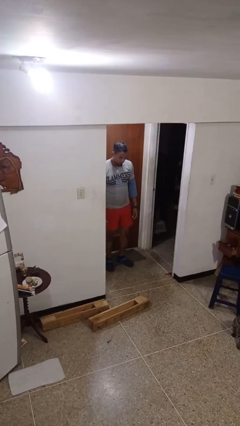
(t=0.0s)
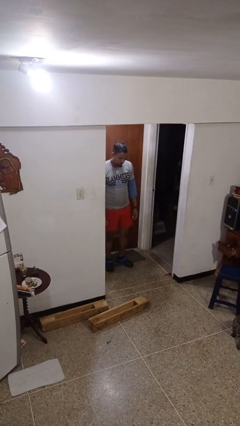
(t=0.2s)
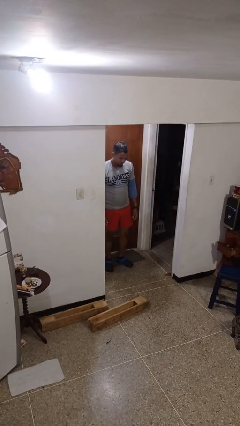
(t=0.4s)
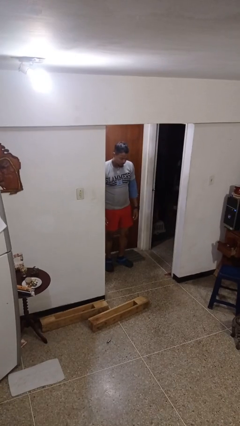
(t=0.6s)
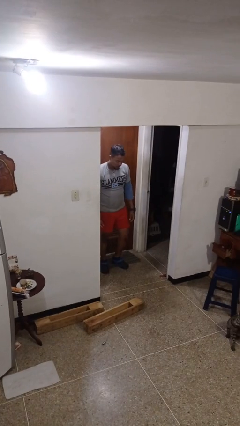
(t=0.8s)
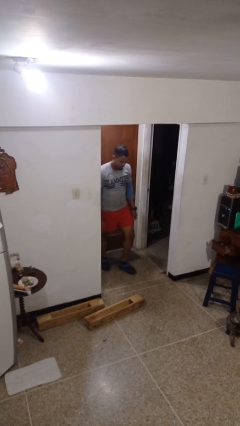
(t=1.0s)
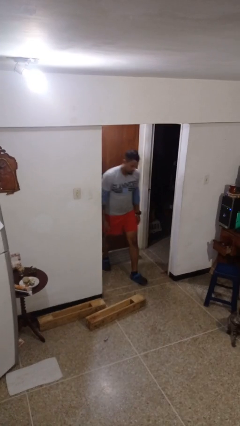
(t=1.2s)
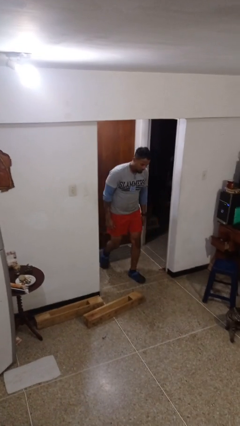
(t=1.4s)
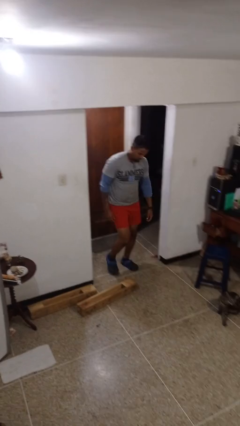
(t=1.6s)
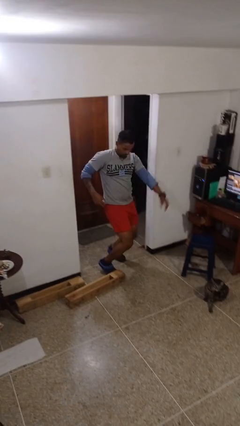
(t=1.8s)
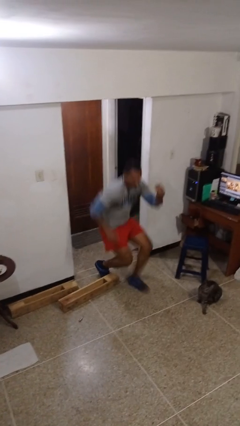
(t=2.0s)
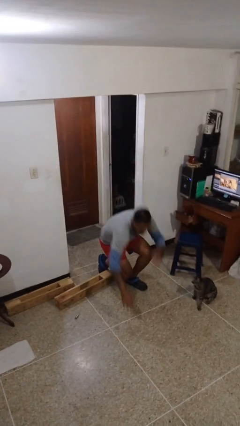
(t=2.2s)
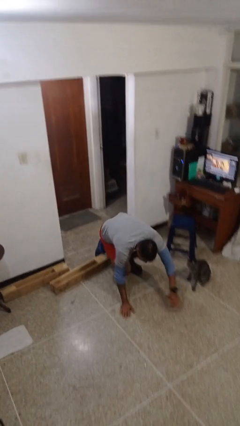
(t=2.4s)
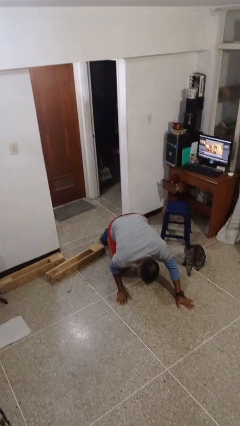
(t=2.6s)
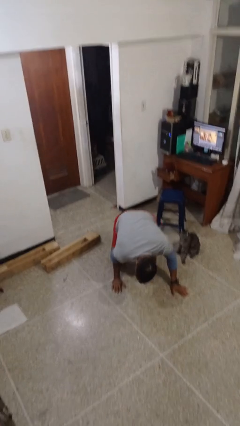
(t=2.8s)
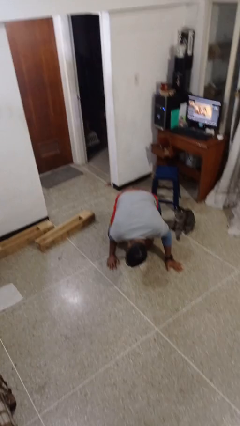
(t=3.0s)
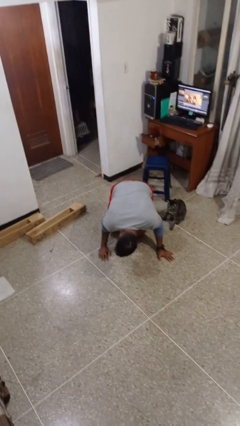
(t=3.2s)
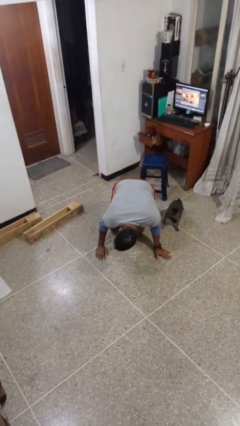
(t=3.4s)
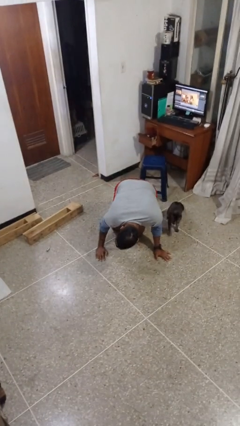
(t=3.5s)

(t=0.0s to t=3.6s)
person trips on object on floor

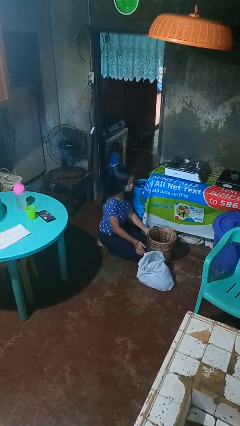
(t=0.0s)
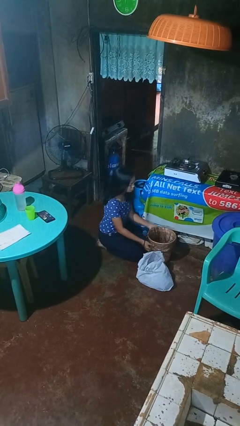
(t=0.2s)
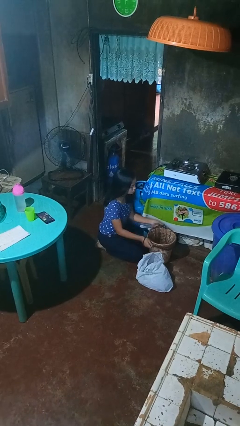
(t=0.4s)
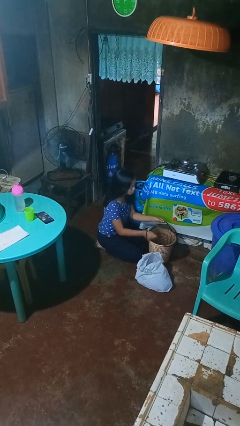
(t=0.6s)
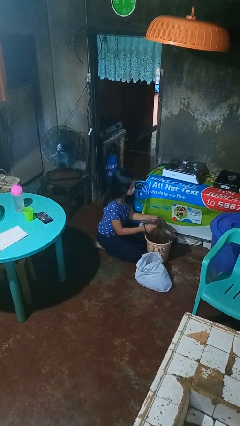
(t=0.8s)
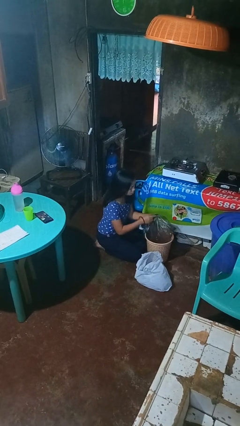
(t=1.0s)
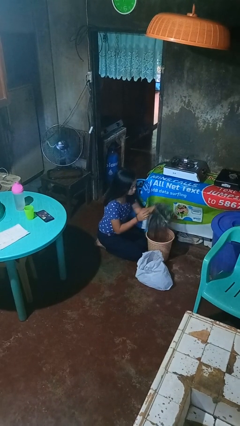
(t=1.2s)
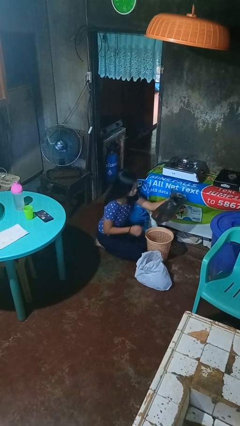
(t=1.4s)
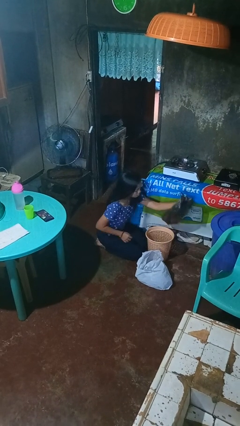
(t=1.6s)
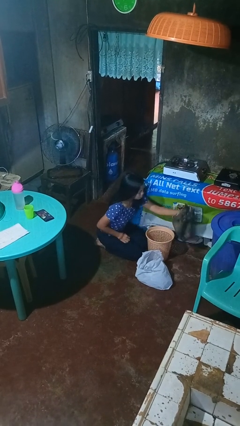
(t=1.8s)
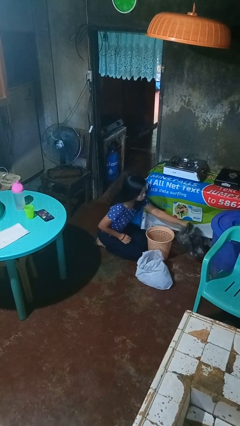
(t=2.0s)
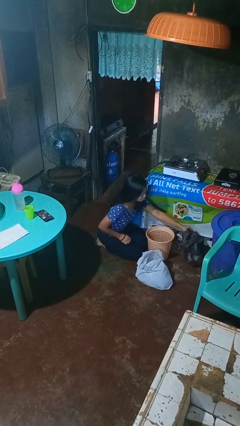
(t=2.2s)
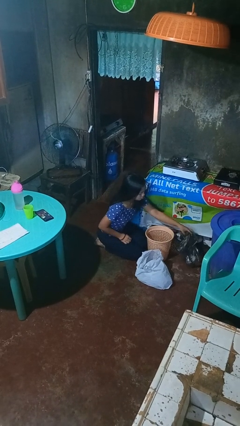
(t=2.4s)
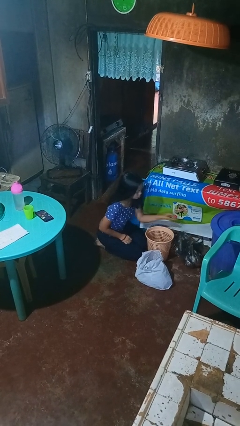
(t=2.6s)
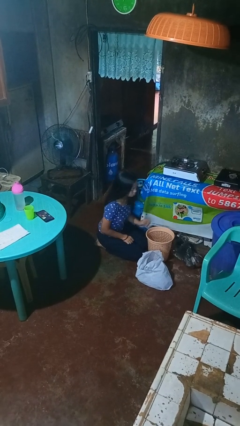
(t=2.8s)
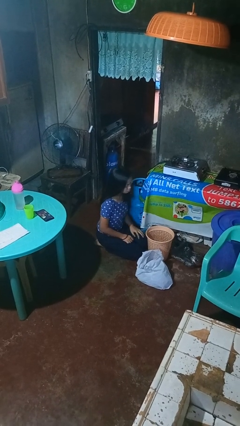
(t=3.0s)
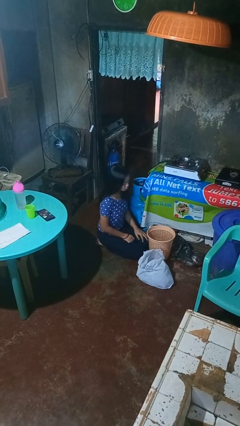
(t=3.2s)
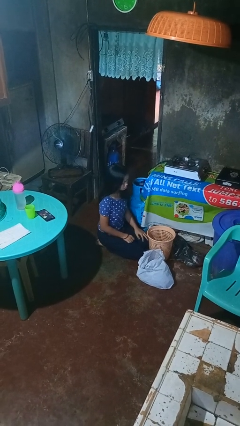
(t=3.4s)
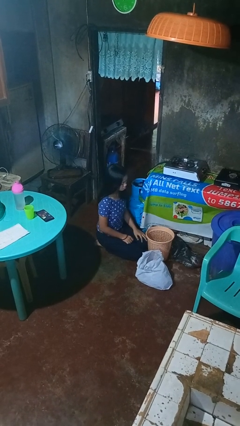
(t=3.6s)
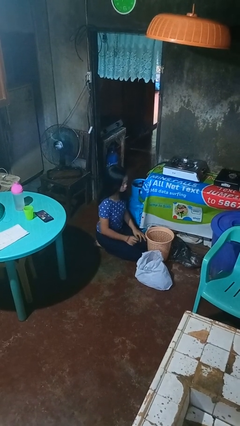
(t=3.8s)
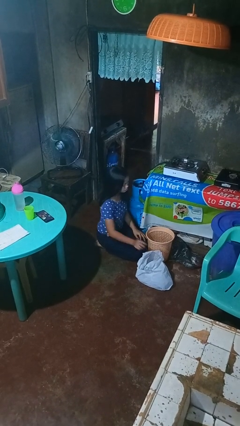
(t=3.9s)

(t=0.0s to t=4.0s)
person removes trashbag from trashcan

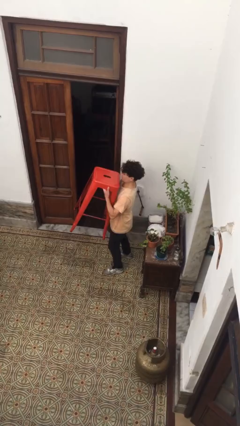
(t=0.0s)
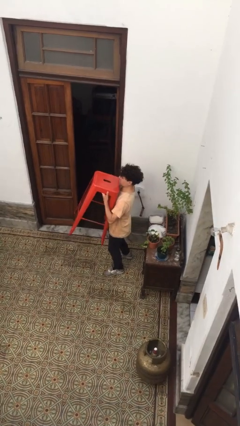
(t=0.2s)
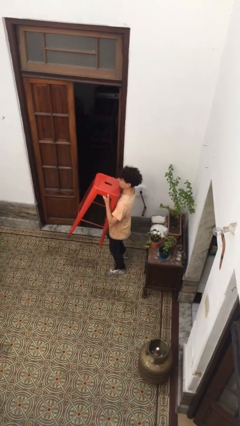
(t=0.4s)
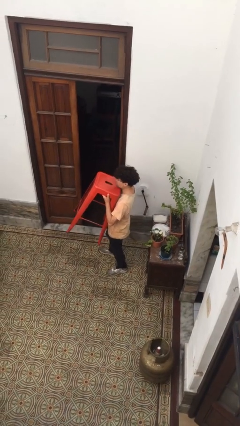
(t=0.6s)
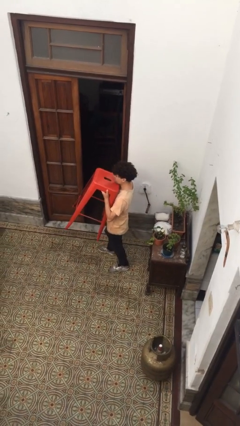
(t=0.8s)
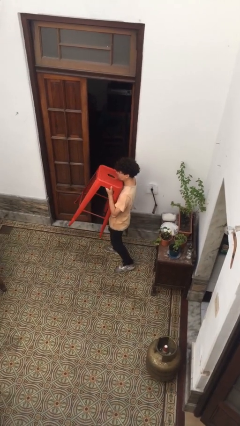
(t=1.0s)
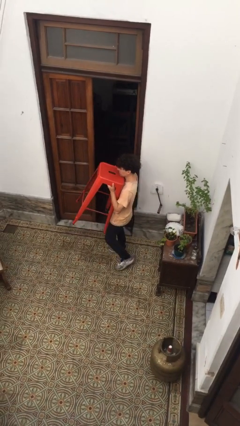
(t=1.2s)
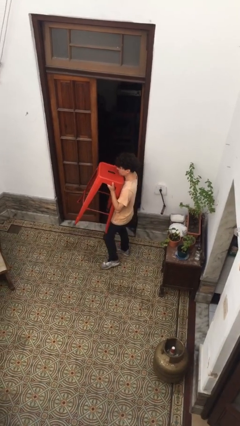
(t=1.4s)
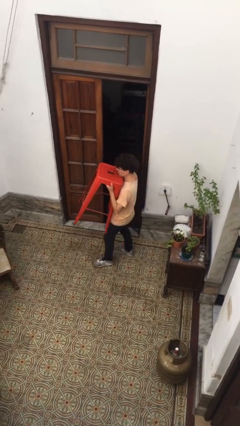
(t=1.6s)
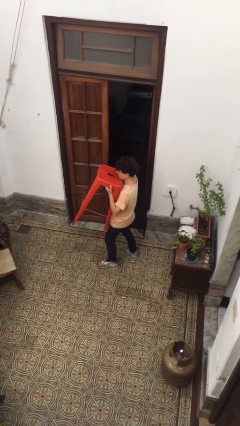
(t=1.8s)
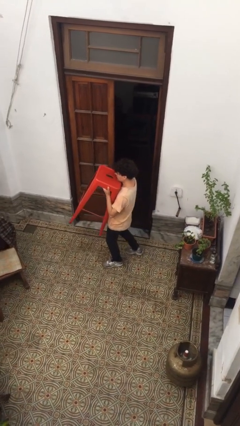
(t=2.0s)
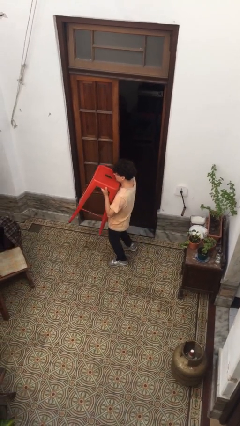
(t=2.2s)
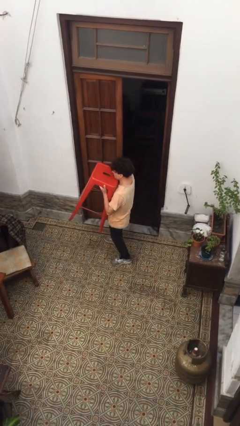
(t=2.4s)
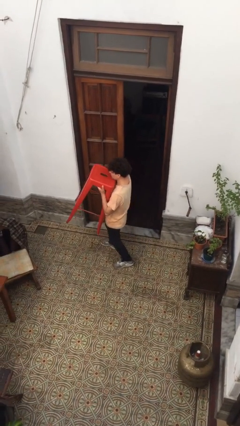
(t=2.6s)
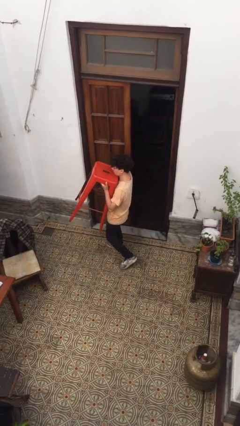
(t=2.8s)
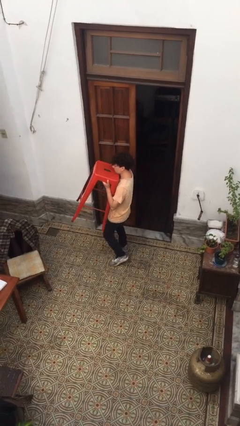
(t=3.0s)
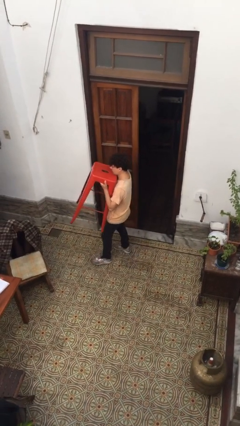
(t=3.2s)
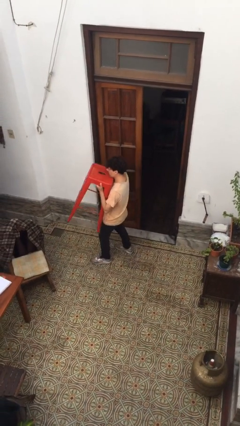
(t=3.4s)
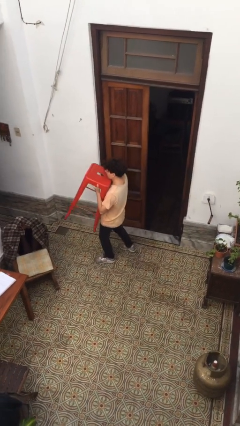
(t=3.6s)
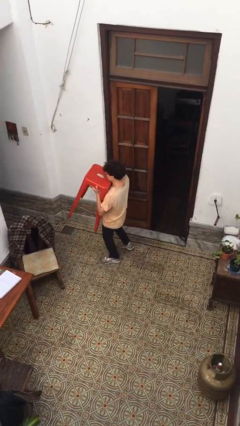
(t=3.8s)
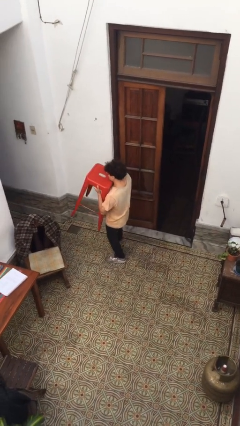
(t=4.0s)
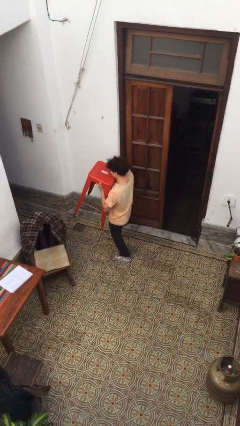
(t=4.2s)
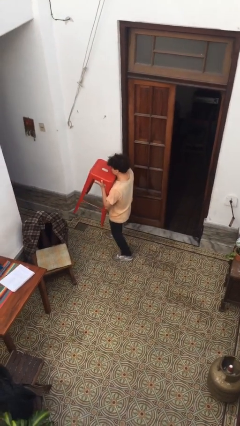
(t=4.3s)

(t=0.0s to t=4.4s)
person carries heavy object

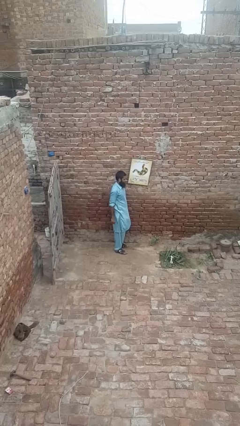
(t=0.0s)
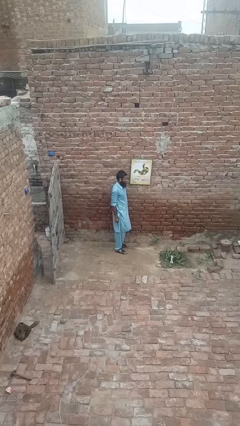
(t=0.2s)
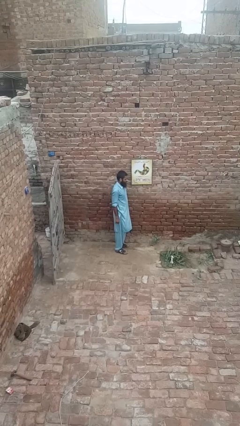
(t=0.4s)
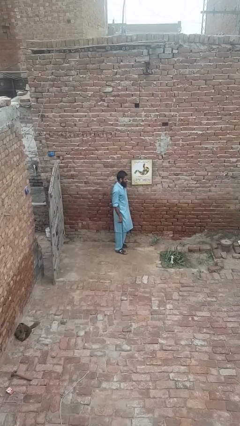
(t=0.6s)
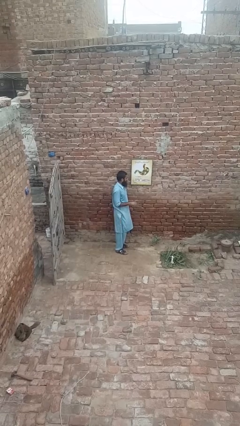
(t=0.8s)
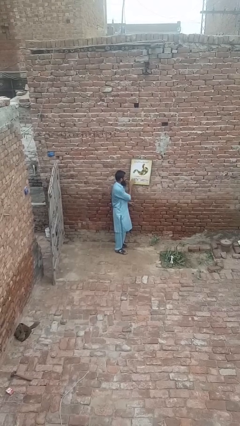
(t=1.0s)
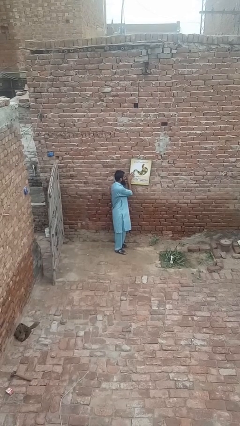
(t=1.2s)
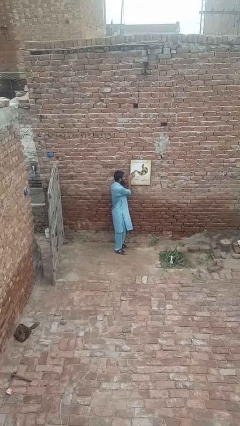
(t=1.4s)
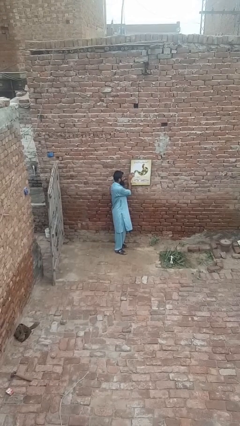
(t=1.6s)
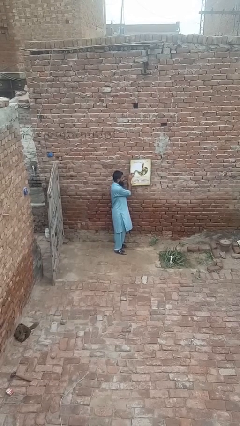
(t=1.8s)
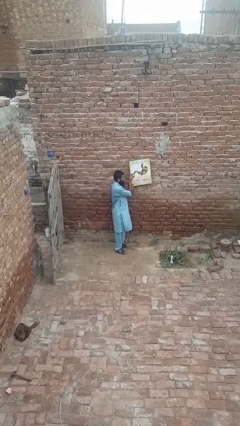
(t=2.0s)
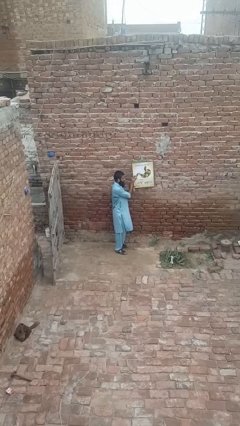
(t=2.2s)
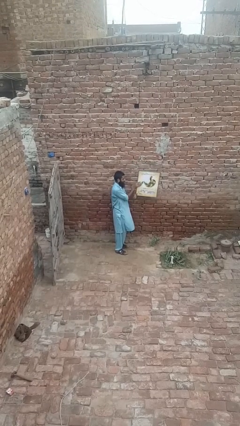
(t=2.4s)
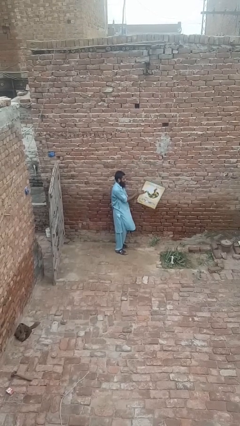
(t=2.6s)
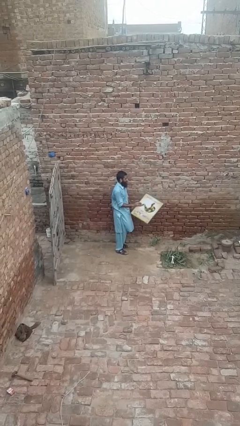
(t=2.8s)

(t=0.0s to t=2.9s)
person takes down picture frame

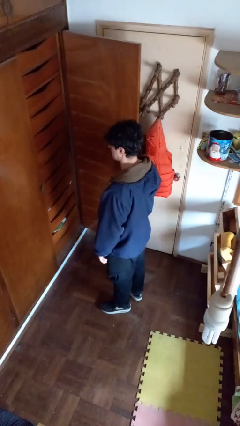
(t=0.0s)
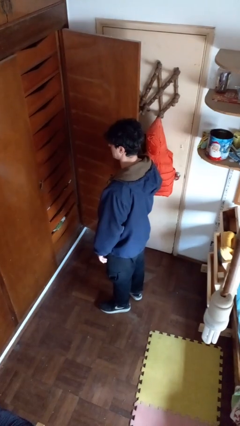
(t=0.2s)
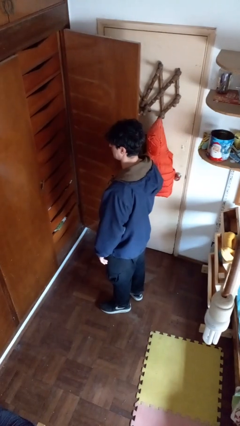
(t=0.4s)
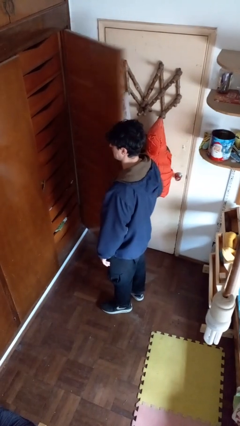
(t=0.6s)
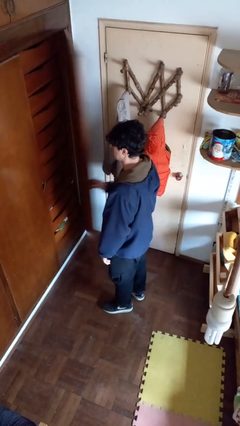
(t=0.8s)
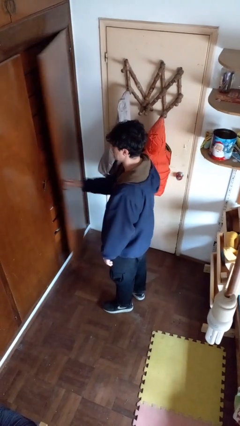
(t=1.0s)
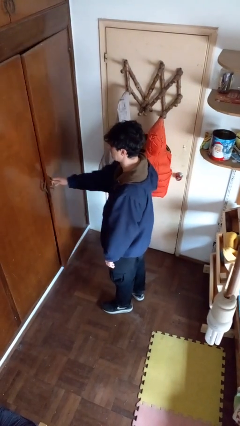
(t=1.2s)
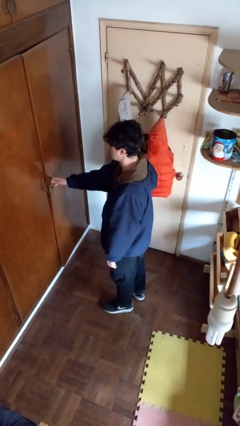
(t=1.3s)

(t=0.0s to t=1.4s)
person closes closet door

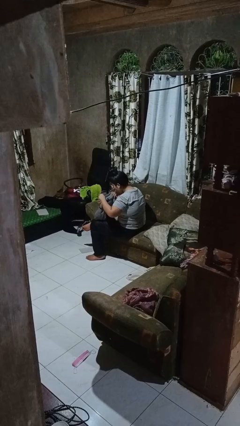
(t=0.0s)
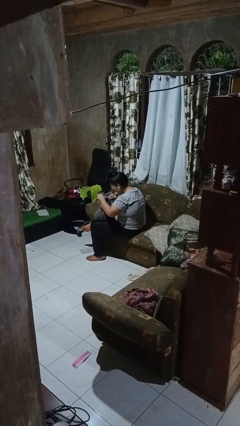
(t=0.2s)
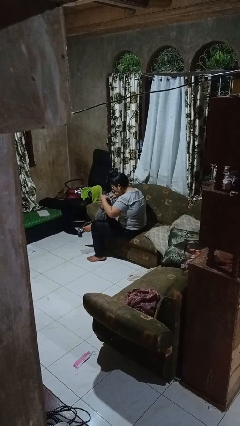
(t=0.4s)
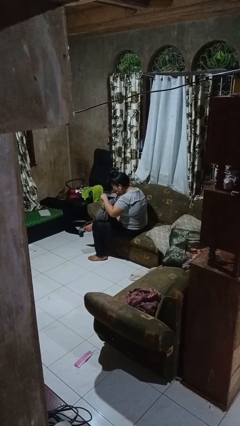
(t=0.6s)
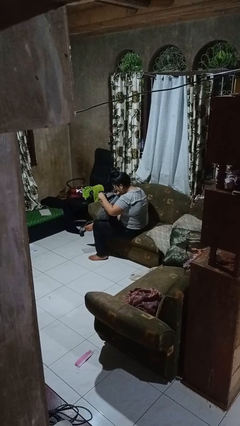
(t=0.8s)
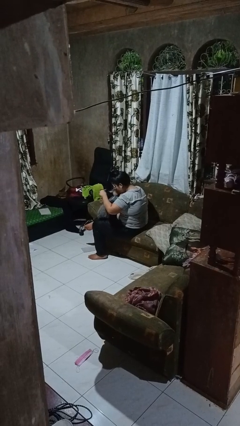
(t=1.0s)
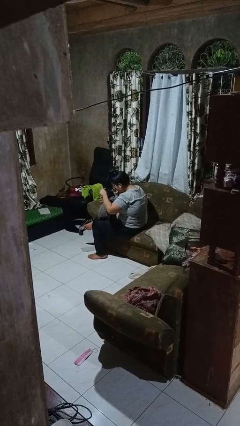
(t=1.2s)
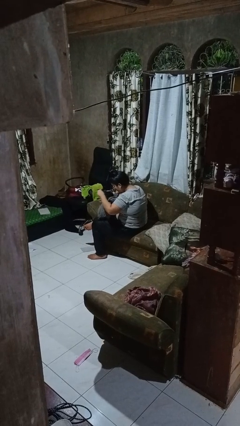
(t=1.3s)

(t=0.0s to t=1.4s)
person searches in backpack
